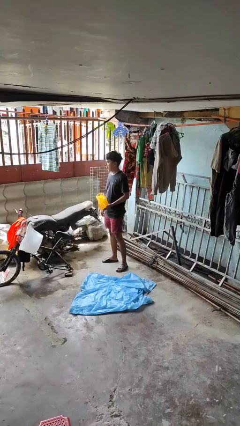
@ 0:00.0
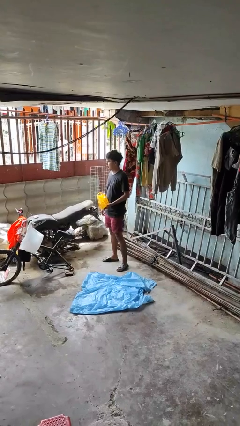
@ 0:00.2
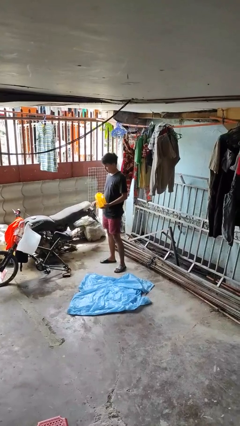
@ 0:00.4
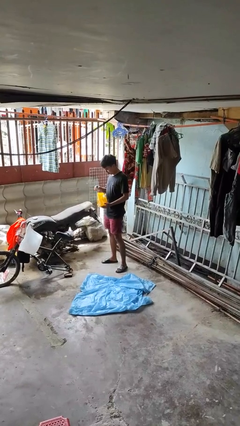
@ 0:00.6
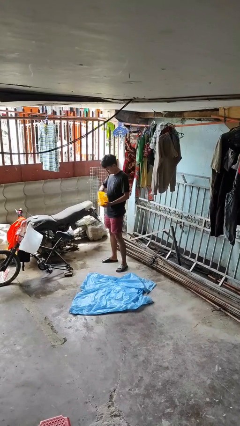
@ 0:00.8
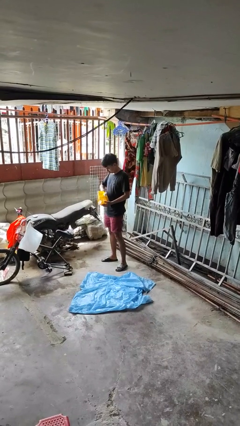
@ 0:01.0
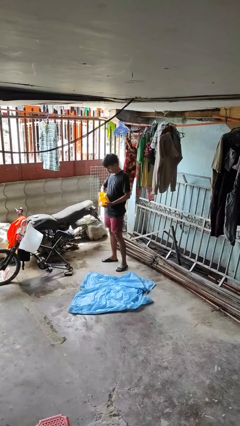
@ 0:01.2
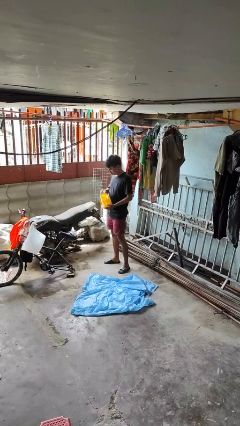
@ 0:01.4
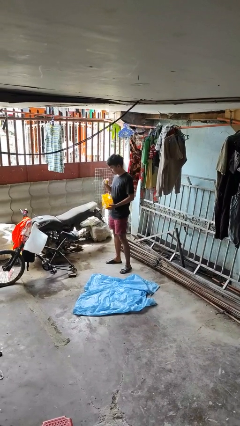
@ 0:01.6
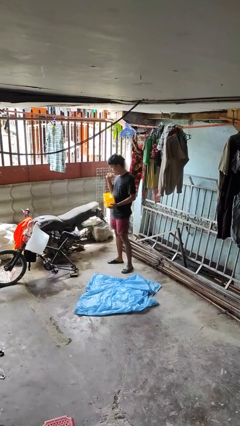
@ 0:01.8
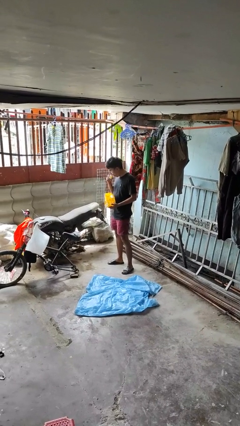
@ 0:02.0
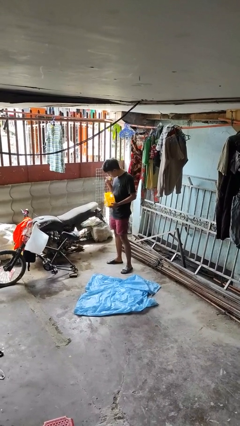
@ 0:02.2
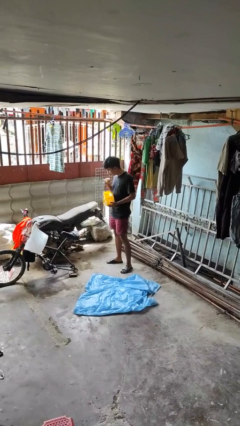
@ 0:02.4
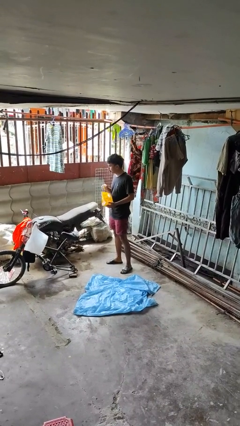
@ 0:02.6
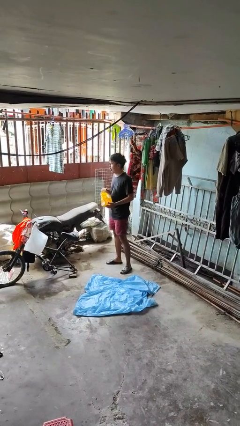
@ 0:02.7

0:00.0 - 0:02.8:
person eats snack from bag

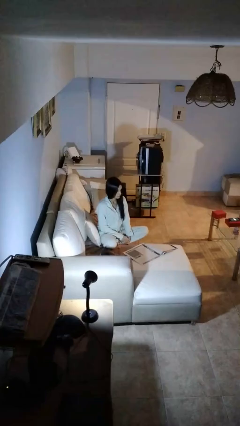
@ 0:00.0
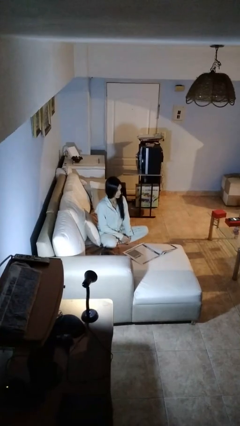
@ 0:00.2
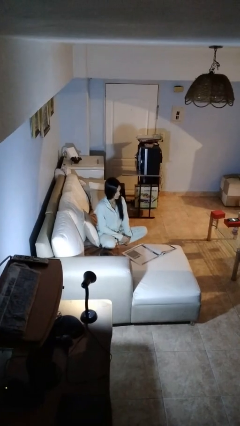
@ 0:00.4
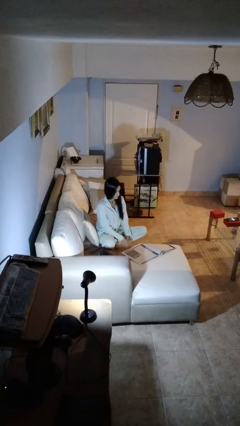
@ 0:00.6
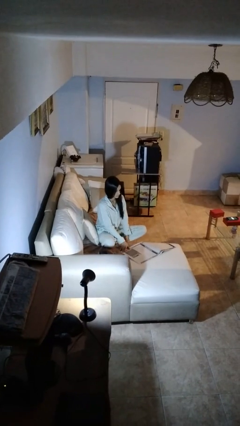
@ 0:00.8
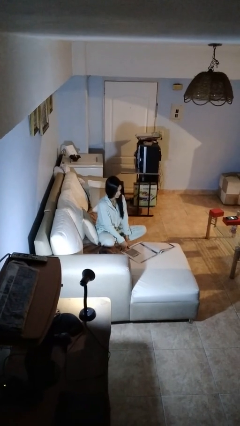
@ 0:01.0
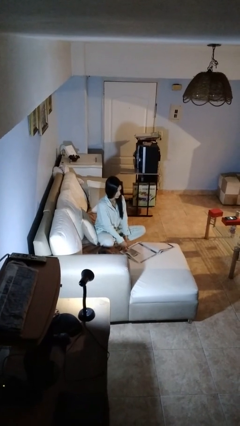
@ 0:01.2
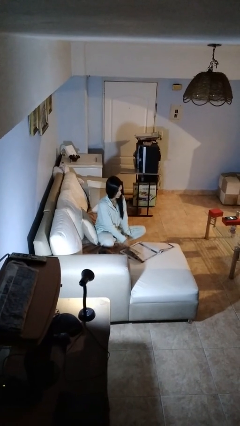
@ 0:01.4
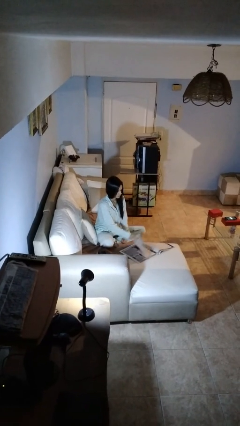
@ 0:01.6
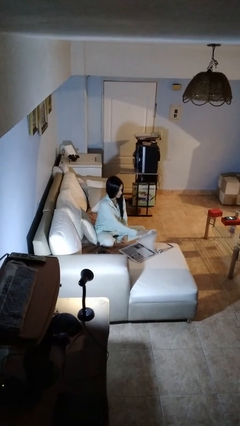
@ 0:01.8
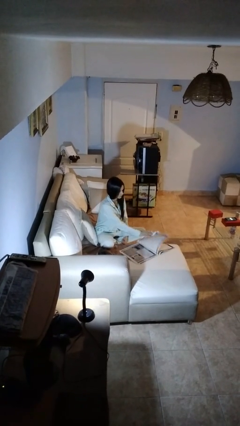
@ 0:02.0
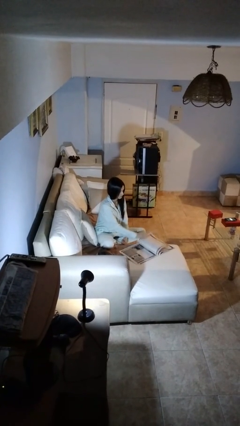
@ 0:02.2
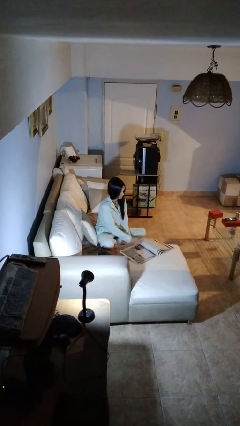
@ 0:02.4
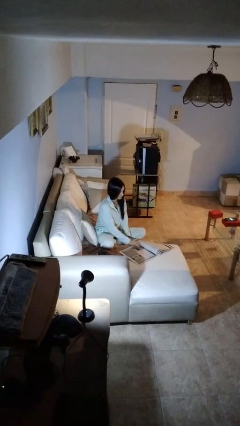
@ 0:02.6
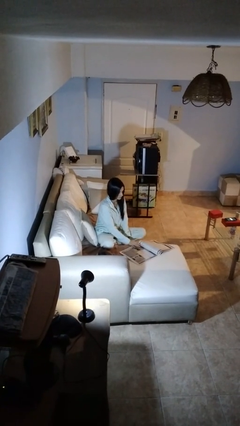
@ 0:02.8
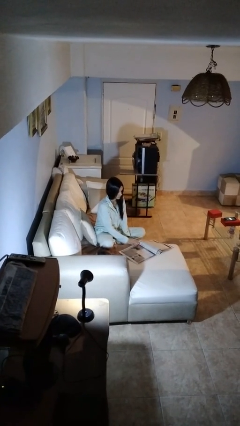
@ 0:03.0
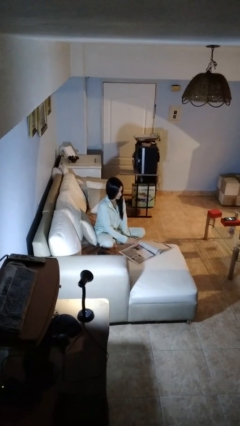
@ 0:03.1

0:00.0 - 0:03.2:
person reads newspaper

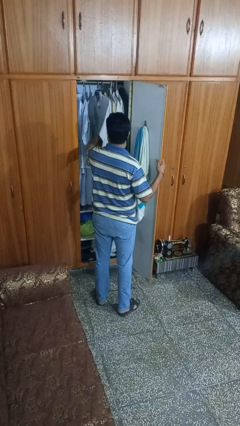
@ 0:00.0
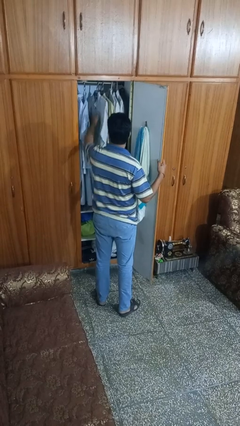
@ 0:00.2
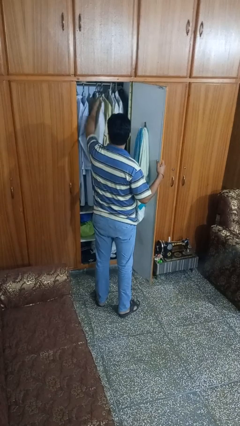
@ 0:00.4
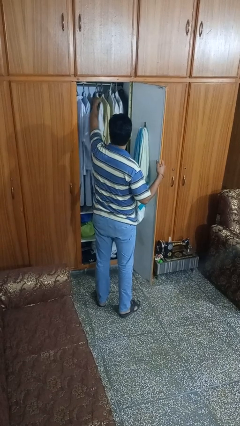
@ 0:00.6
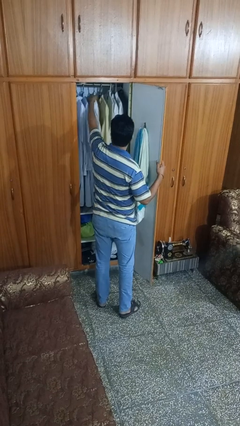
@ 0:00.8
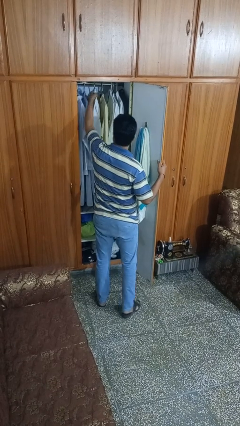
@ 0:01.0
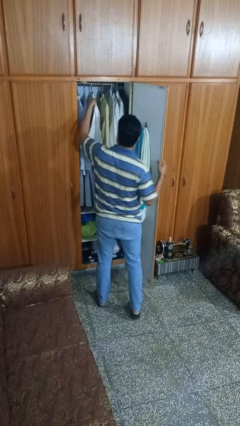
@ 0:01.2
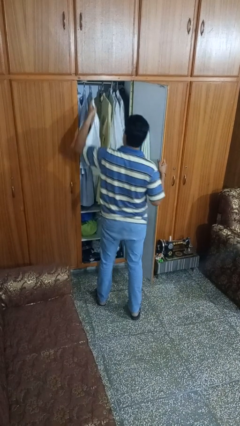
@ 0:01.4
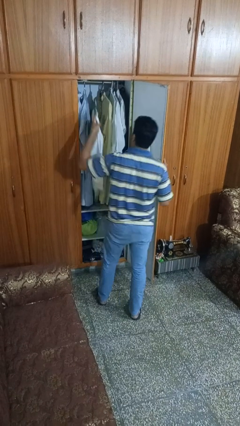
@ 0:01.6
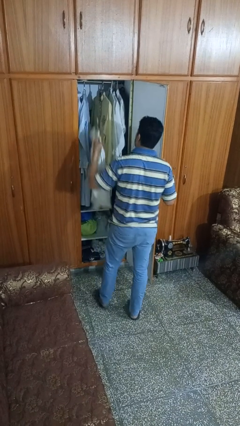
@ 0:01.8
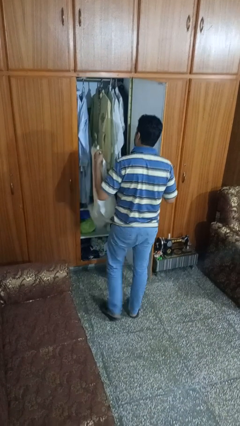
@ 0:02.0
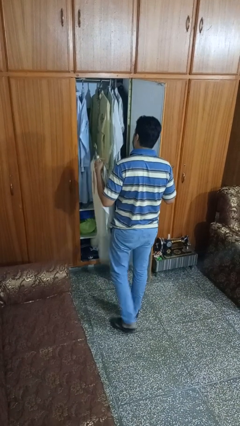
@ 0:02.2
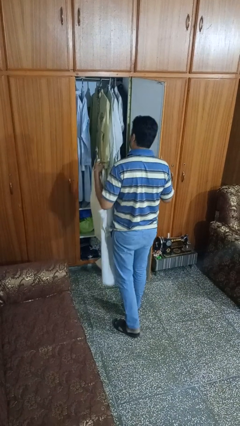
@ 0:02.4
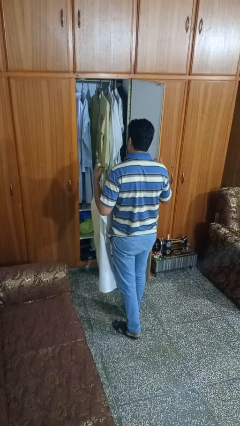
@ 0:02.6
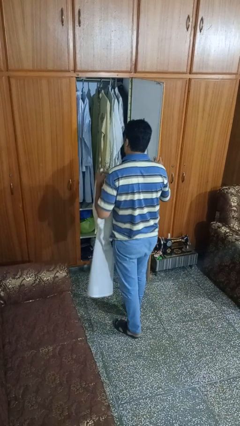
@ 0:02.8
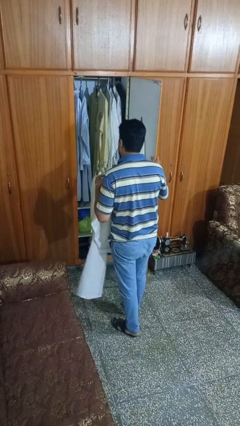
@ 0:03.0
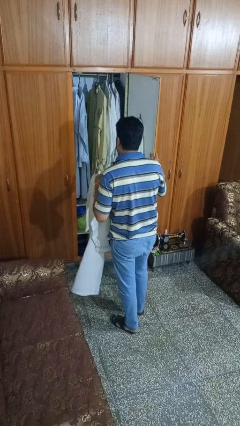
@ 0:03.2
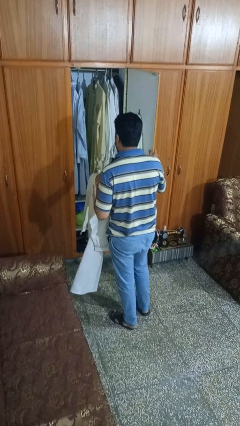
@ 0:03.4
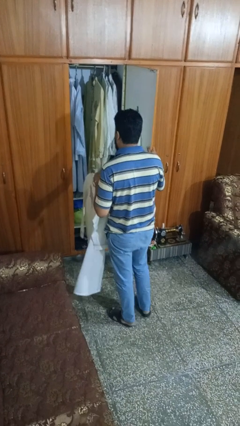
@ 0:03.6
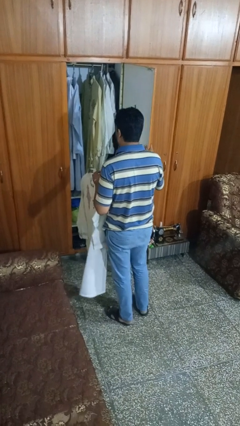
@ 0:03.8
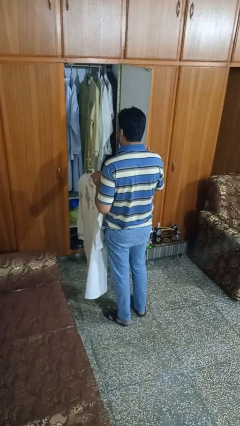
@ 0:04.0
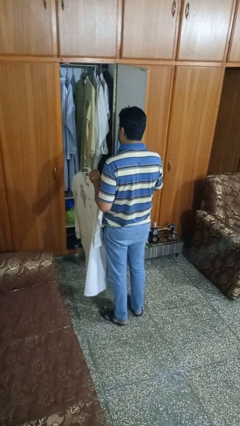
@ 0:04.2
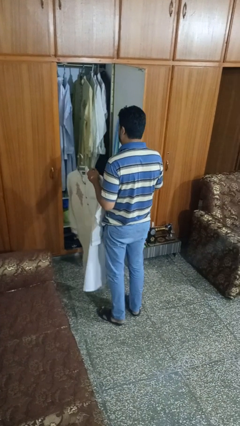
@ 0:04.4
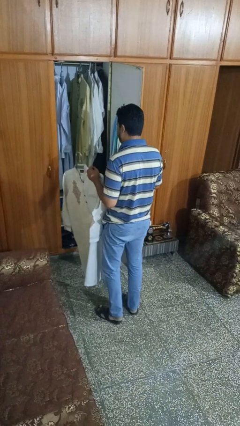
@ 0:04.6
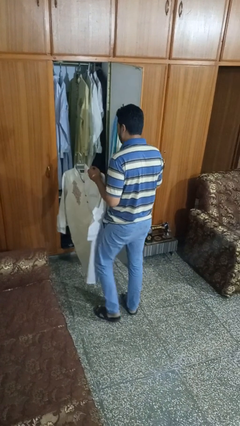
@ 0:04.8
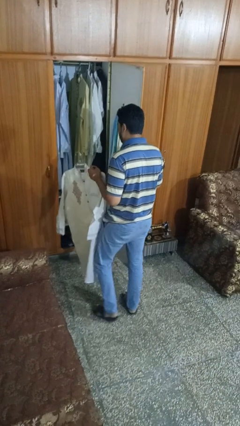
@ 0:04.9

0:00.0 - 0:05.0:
person takes clothes from dresser

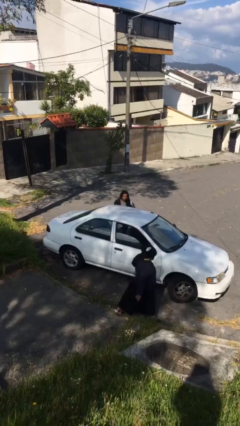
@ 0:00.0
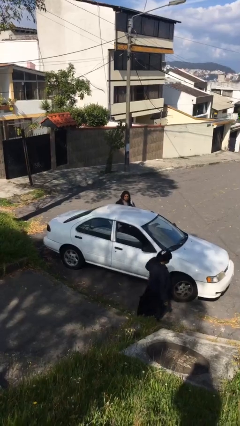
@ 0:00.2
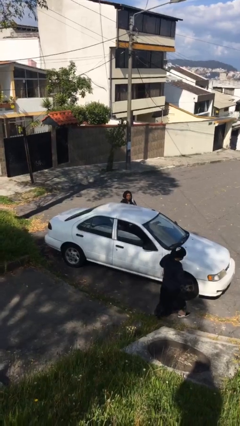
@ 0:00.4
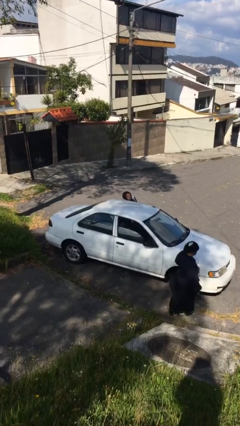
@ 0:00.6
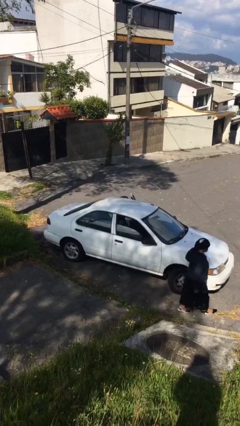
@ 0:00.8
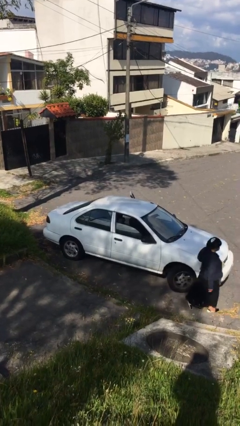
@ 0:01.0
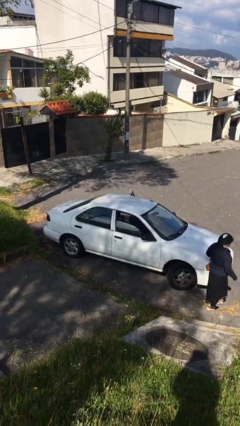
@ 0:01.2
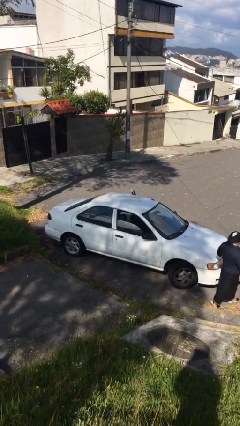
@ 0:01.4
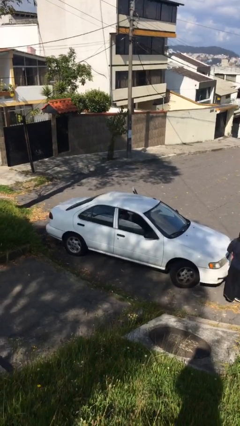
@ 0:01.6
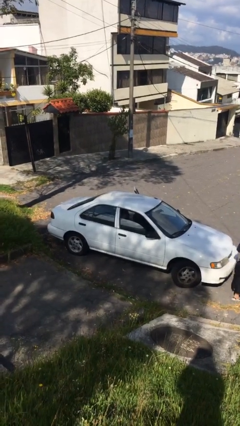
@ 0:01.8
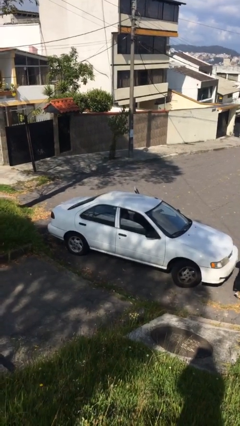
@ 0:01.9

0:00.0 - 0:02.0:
person enters car

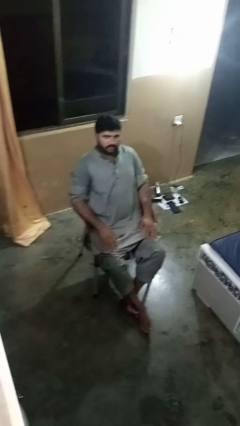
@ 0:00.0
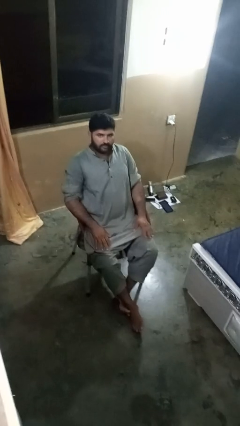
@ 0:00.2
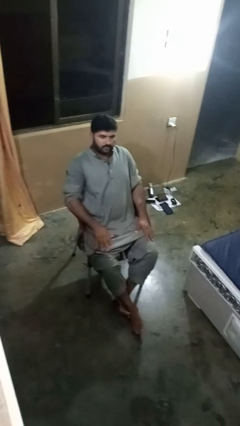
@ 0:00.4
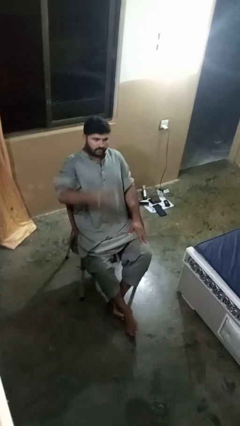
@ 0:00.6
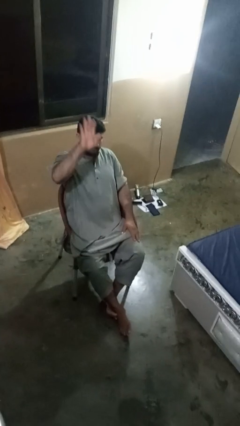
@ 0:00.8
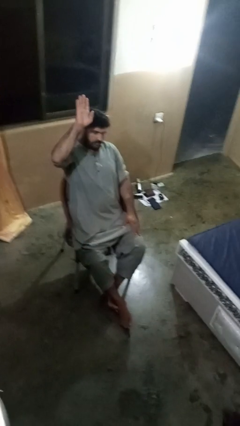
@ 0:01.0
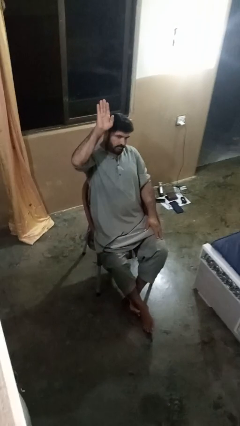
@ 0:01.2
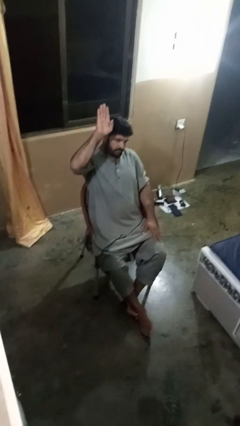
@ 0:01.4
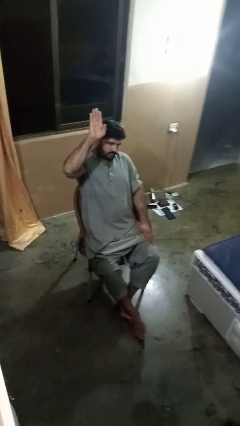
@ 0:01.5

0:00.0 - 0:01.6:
person gestures number five

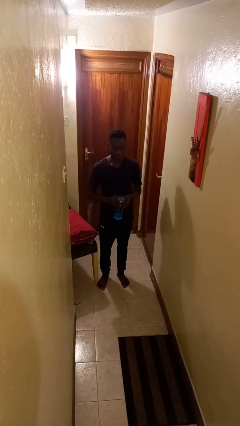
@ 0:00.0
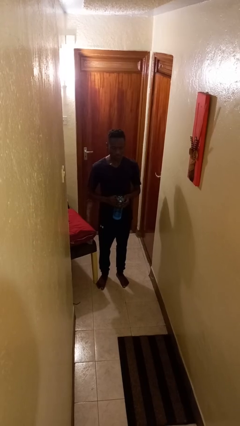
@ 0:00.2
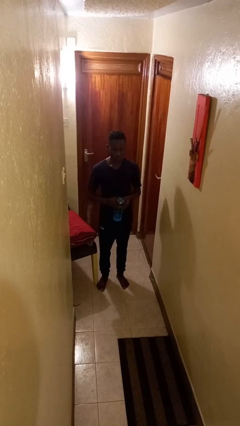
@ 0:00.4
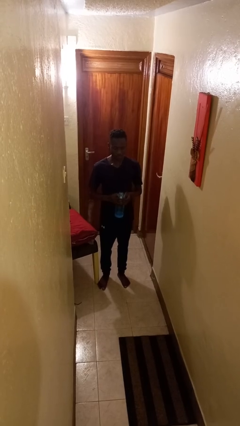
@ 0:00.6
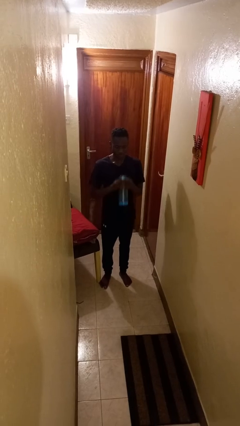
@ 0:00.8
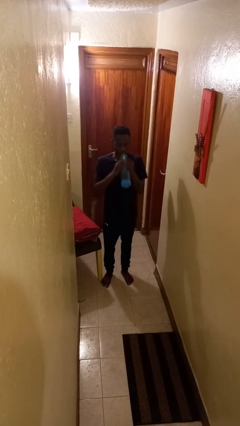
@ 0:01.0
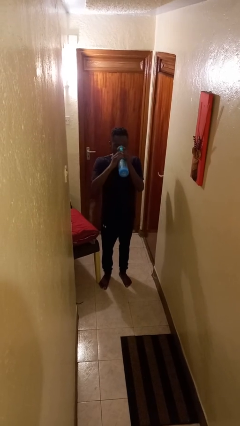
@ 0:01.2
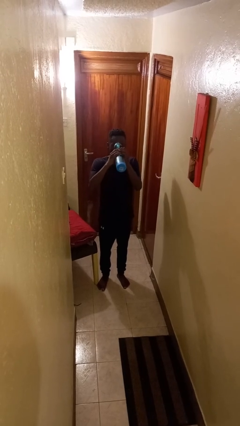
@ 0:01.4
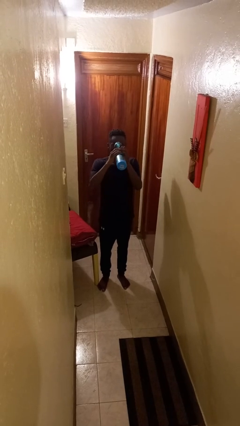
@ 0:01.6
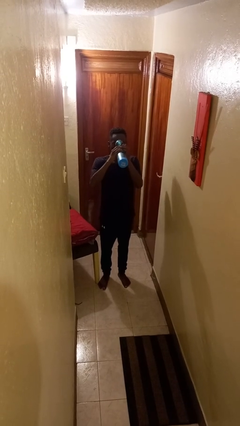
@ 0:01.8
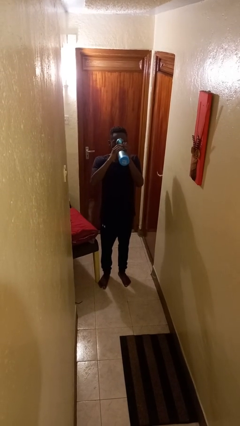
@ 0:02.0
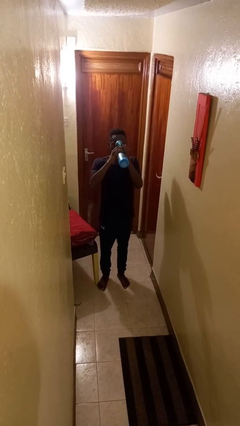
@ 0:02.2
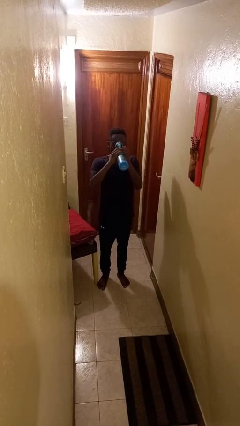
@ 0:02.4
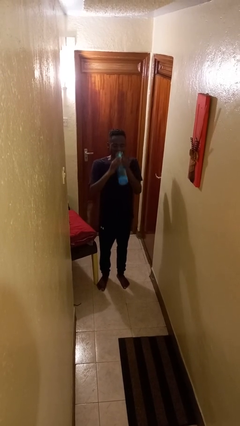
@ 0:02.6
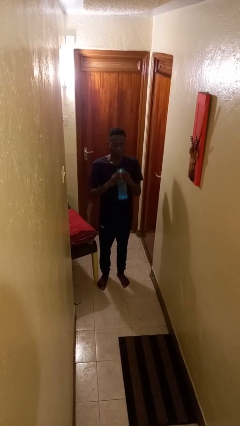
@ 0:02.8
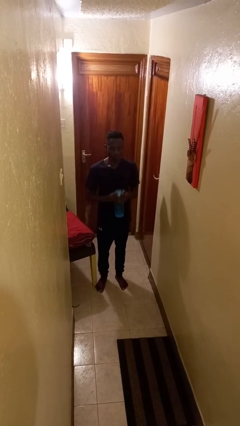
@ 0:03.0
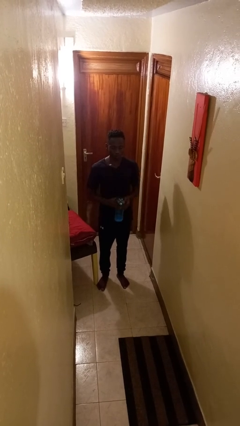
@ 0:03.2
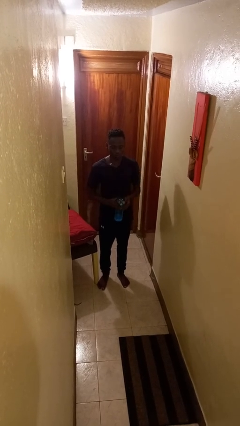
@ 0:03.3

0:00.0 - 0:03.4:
person drinks from bottle
